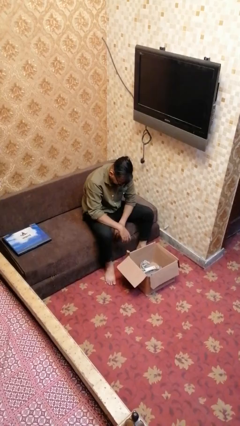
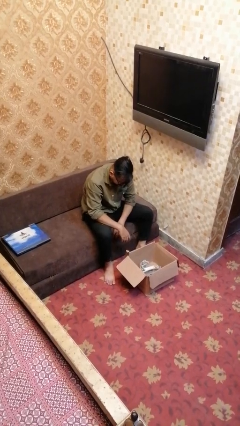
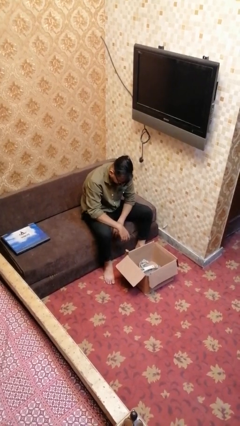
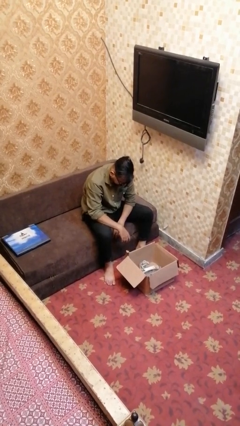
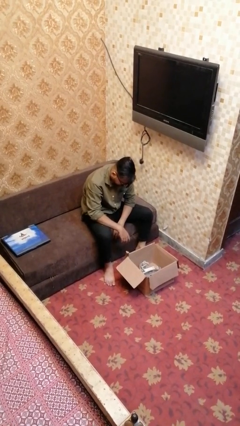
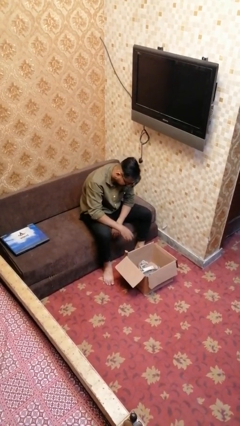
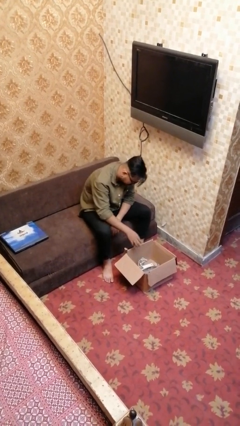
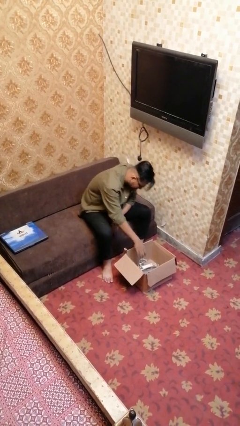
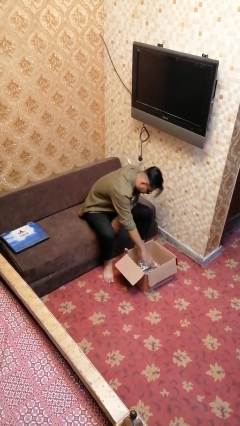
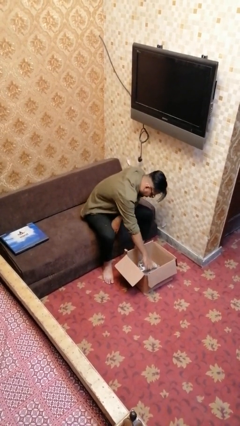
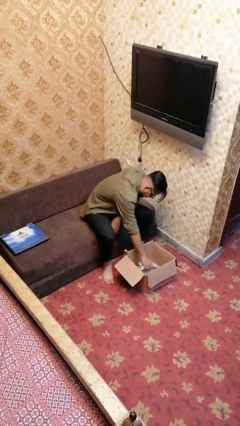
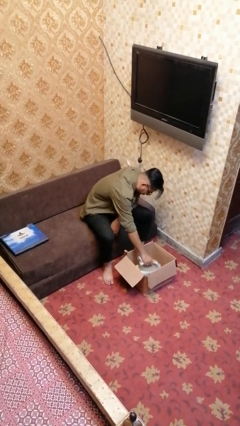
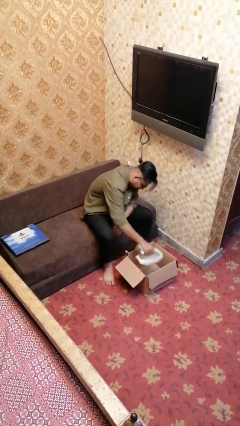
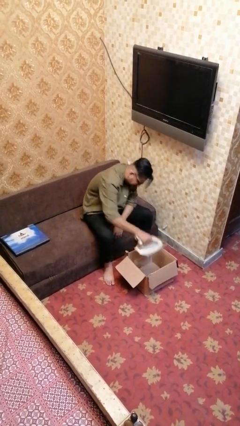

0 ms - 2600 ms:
person takes object from box

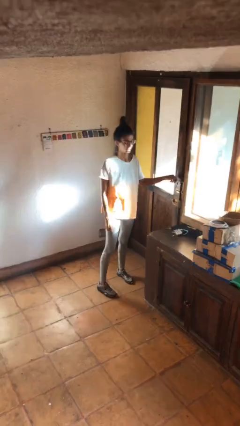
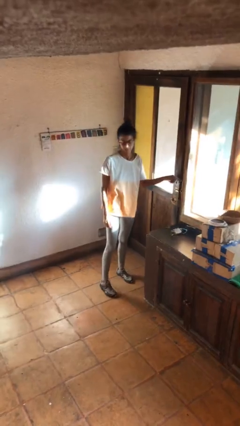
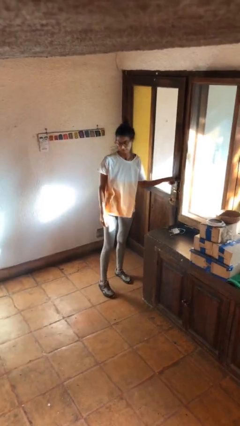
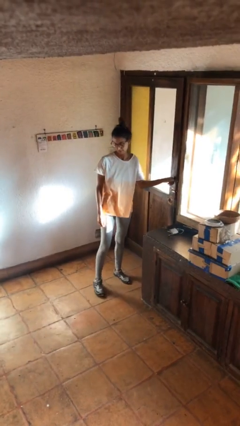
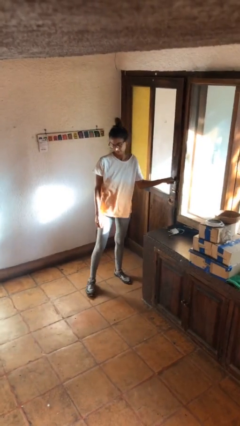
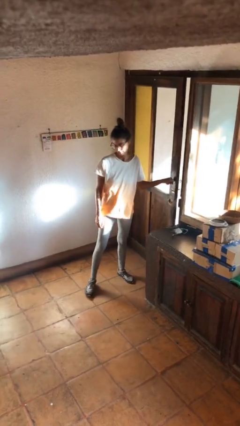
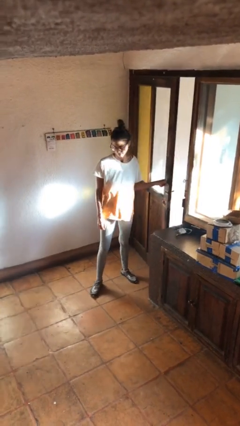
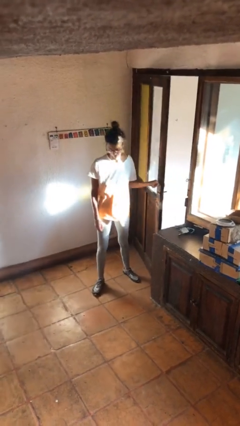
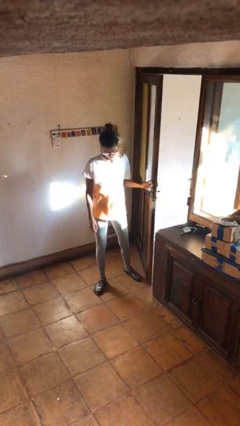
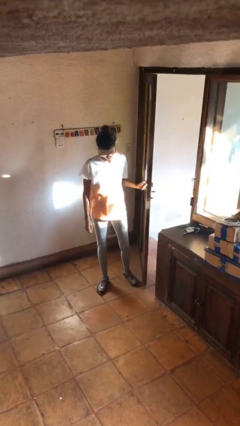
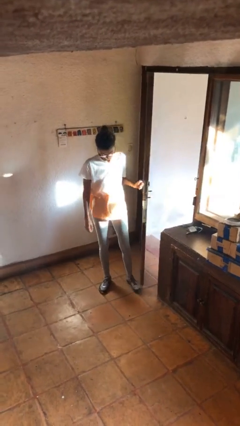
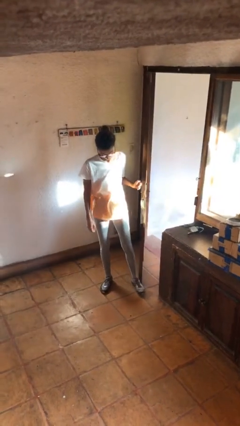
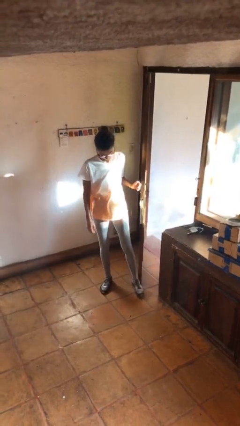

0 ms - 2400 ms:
person opens facility door

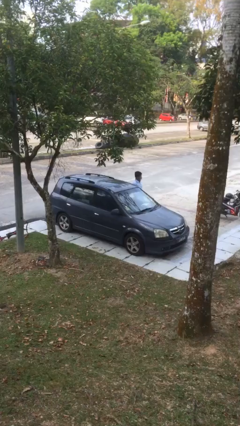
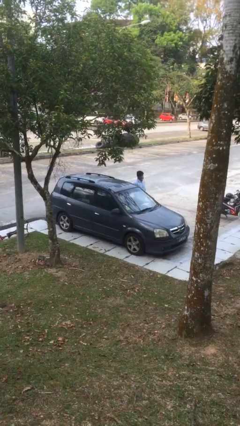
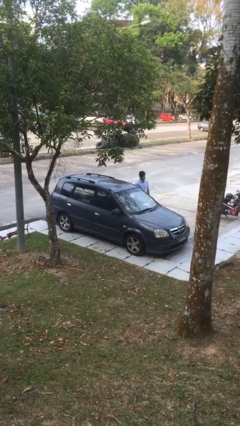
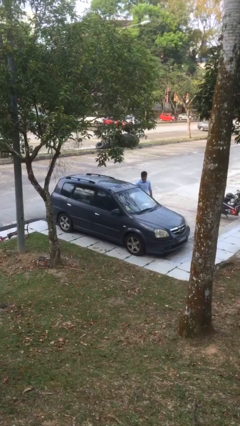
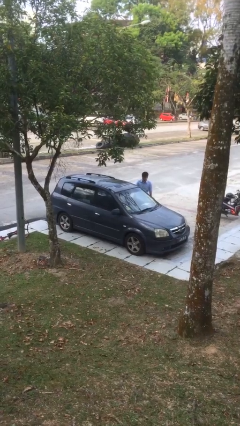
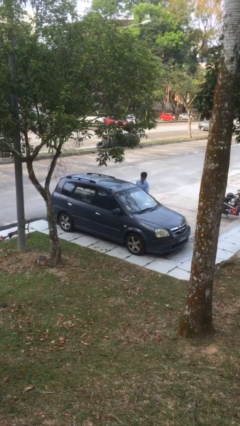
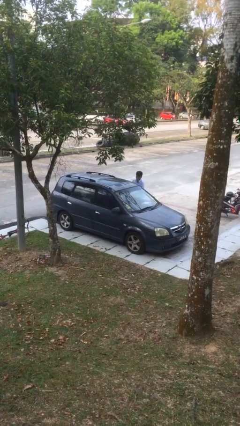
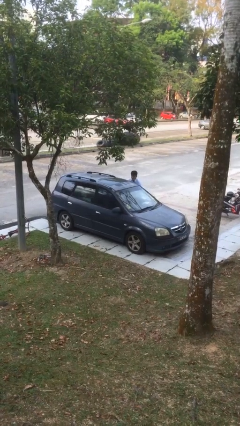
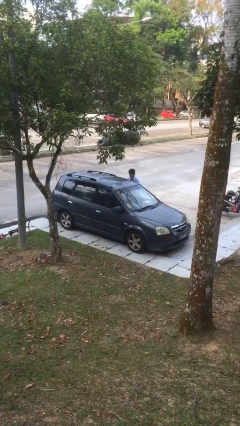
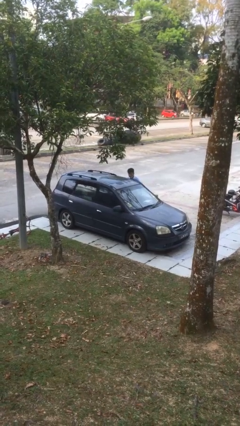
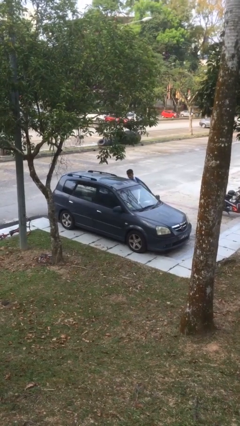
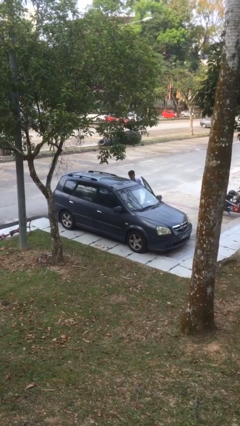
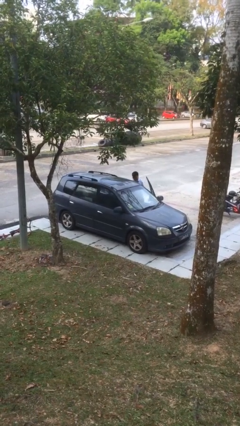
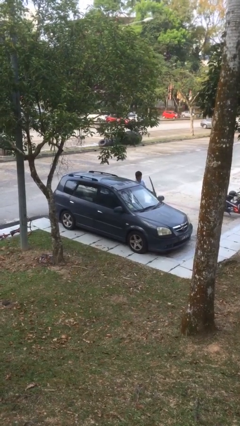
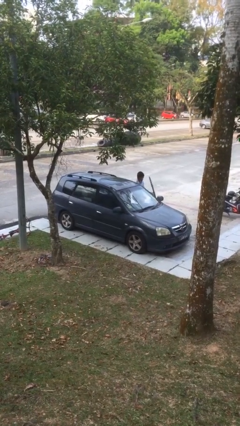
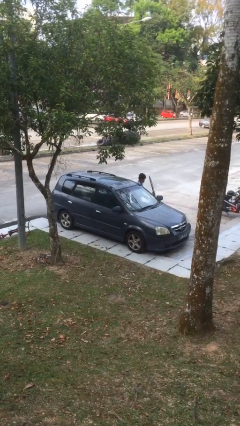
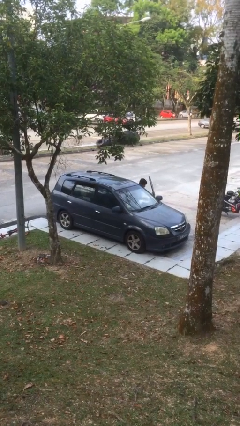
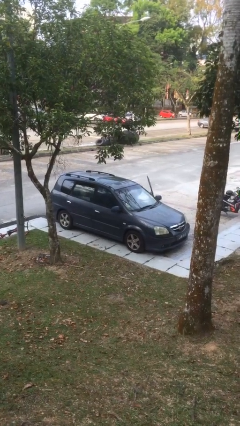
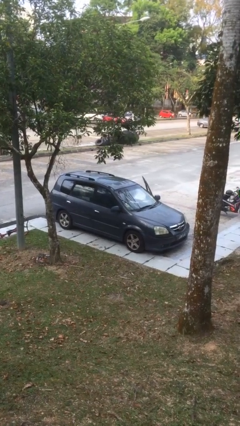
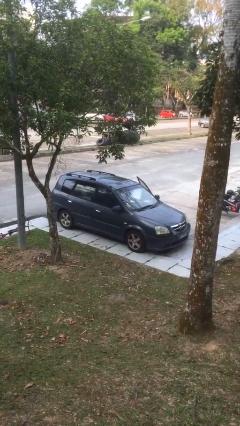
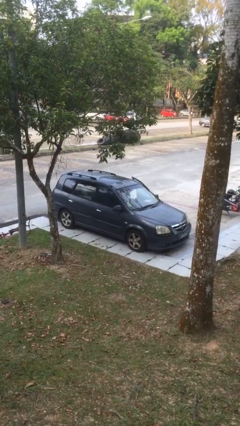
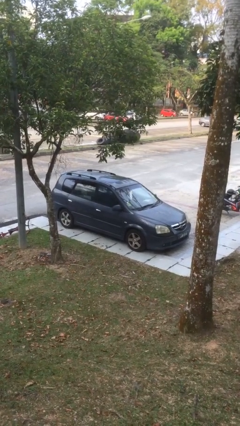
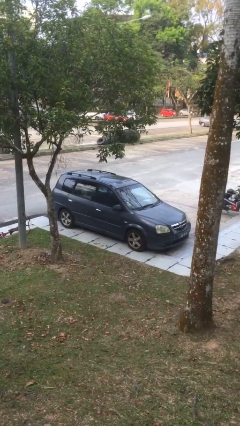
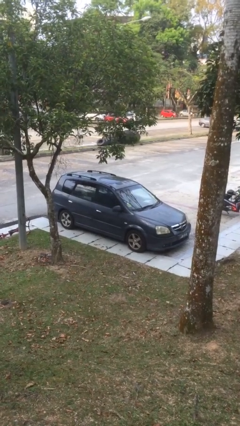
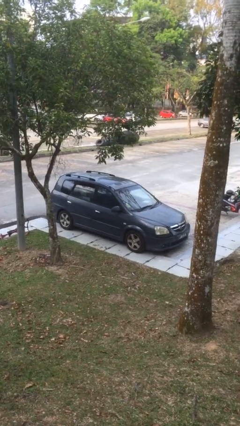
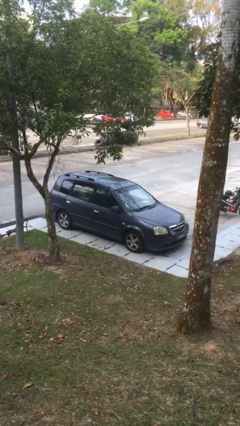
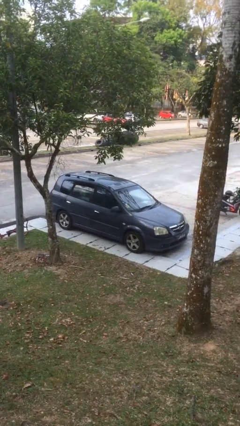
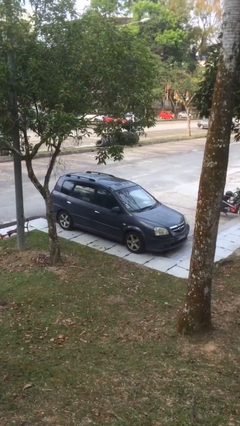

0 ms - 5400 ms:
car picks up person

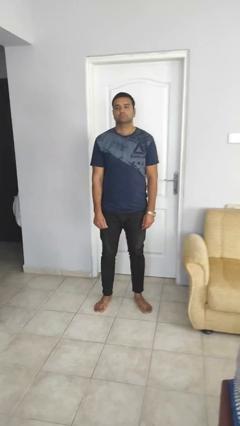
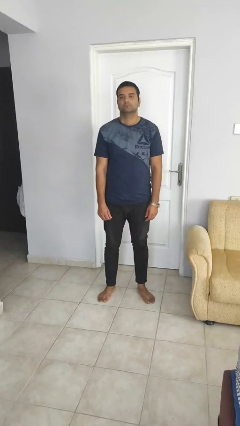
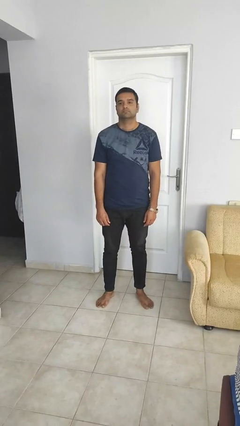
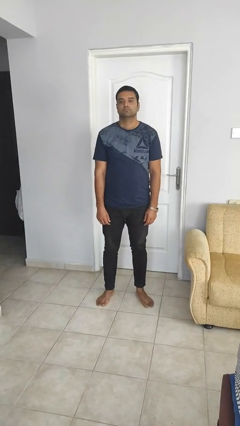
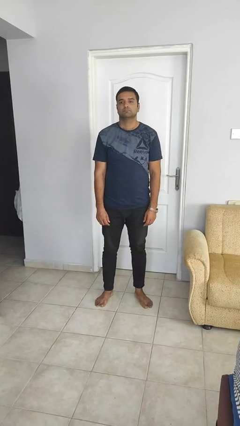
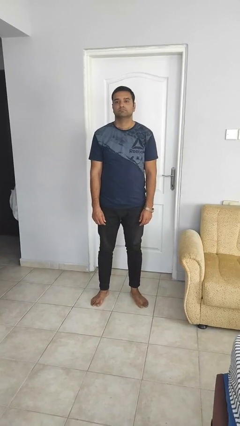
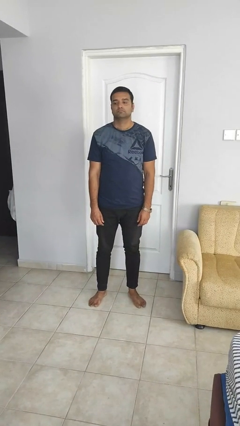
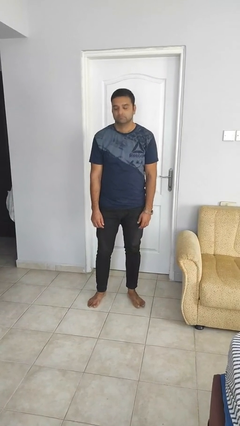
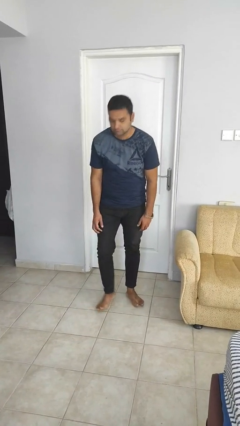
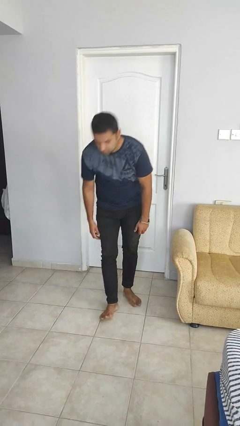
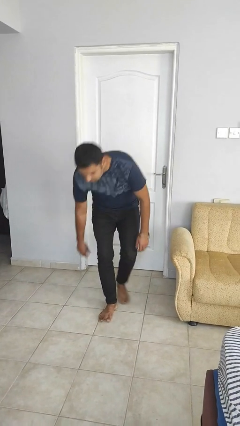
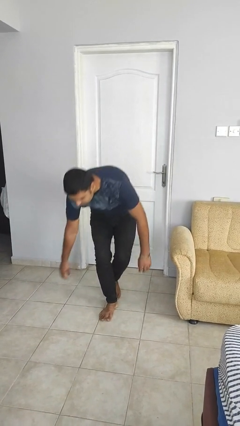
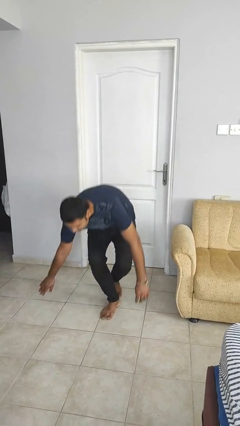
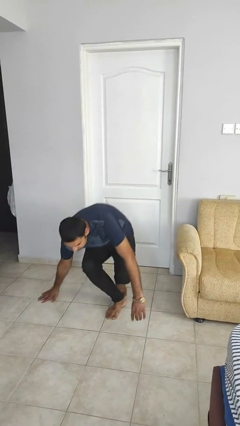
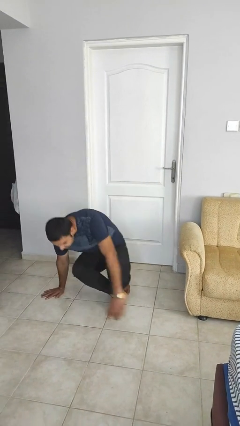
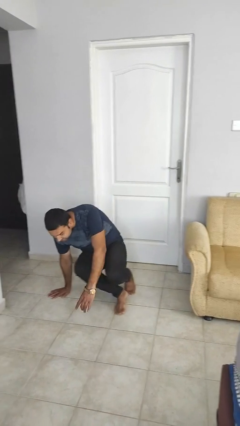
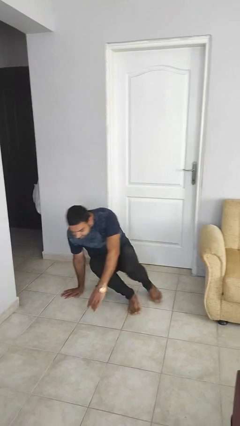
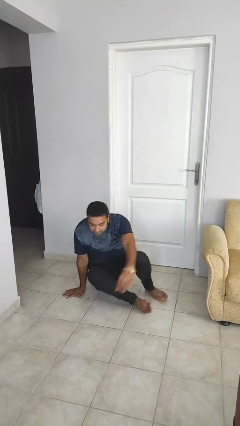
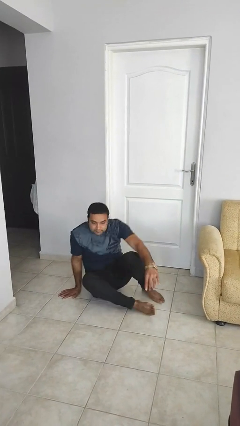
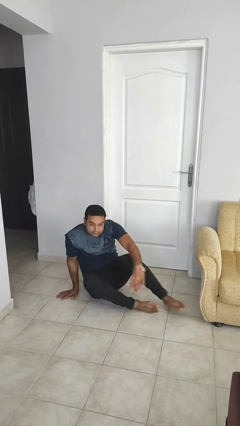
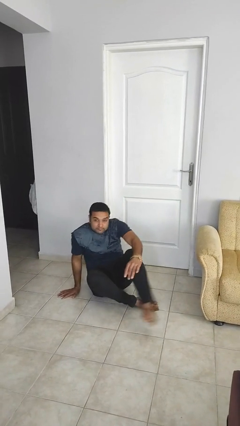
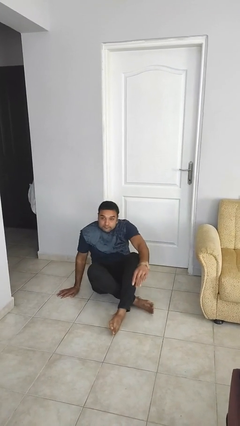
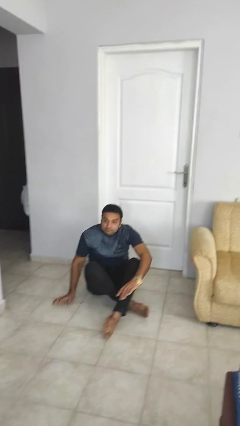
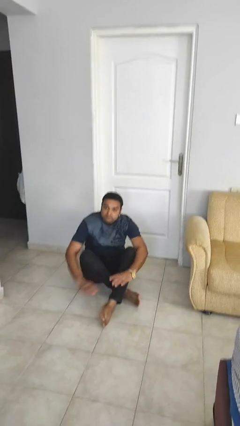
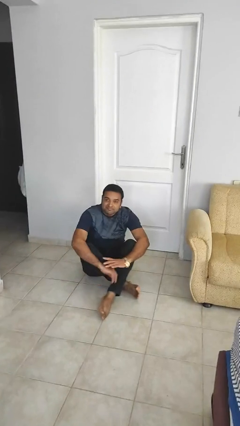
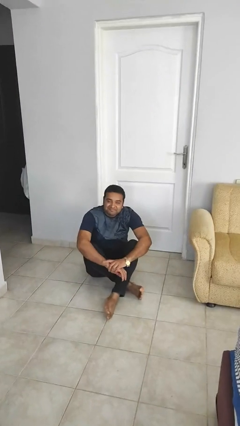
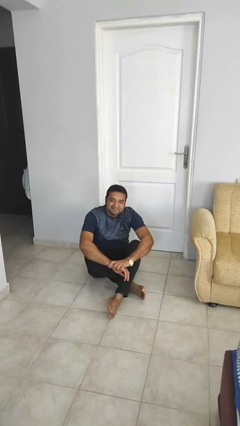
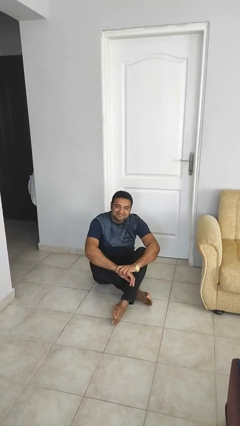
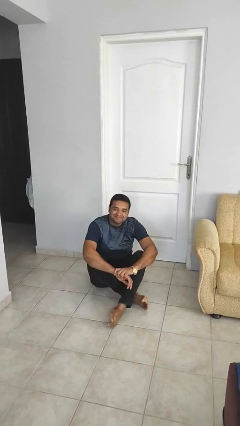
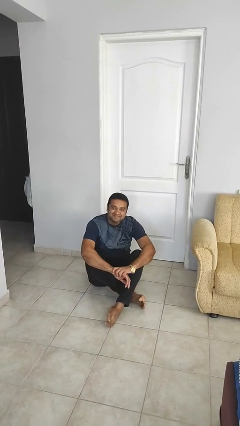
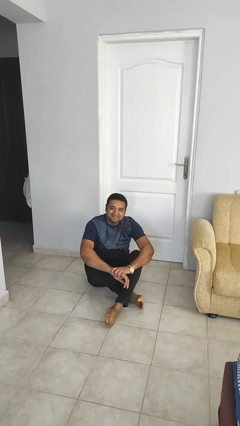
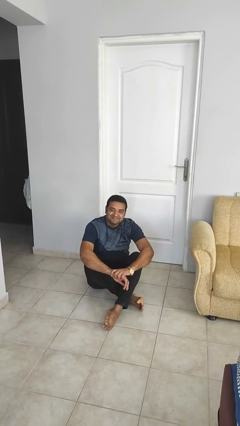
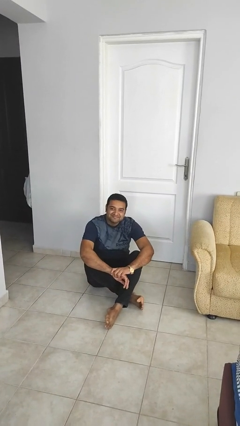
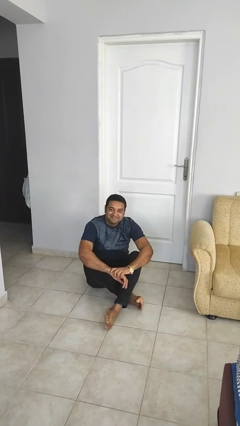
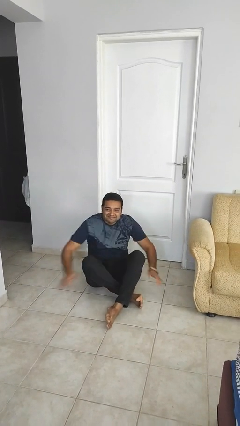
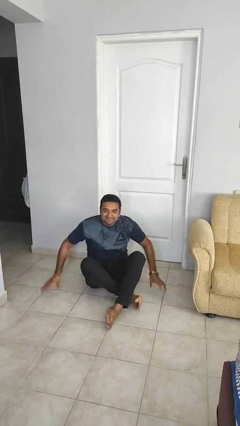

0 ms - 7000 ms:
person sits crisscross
